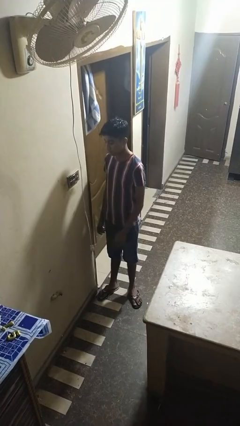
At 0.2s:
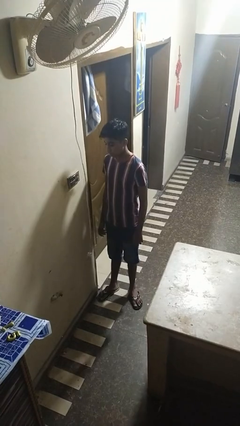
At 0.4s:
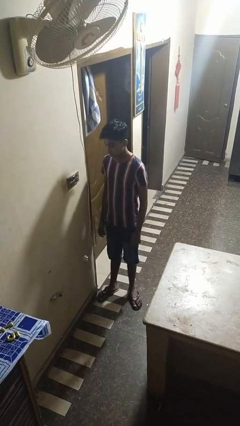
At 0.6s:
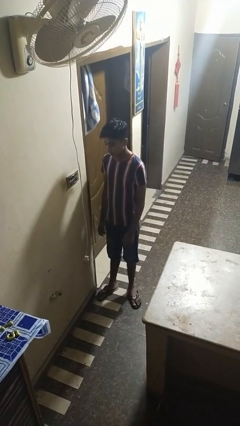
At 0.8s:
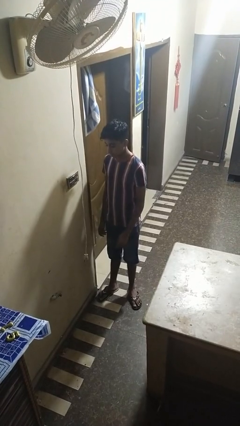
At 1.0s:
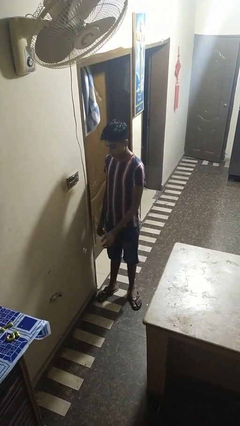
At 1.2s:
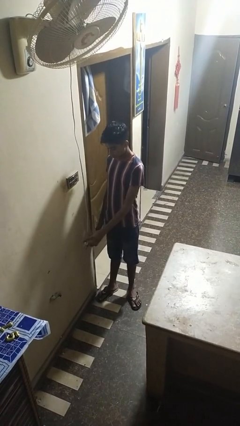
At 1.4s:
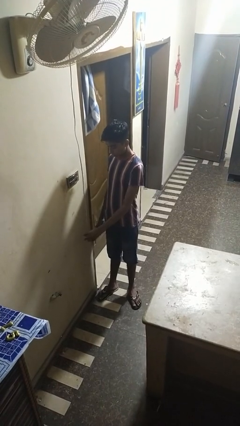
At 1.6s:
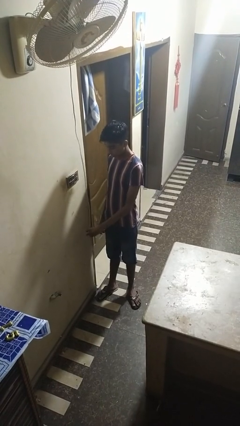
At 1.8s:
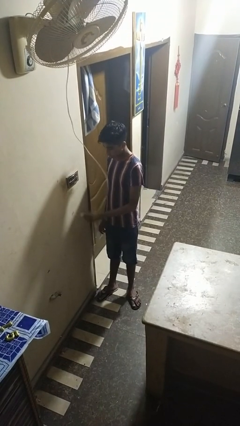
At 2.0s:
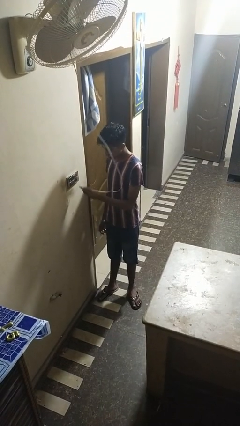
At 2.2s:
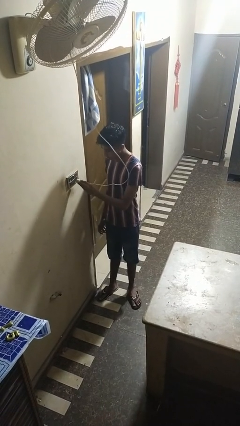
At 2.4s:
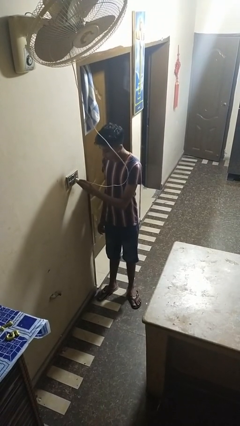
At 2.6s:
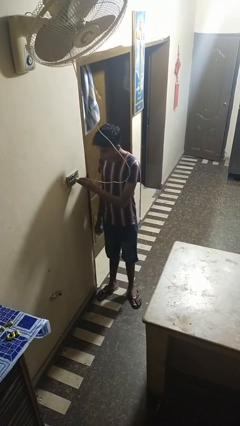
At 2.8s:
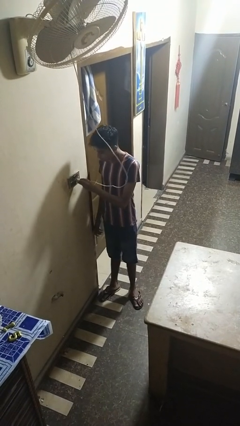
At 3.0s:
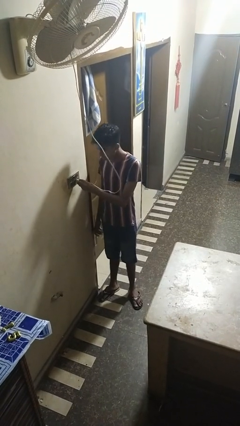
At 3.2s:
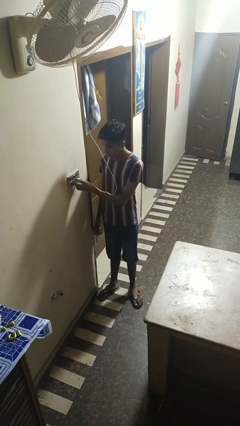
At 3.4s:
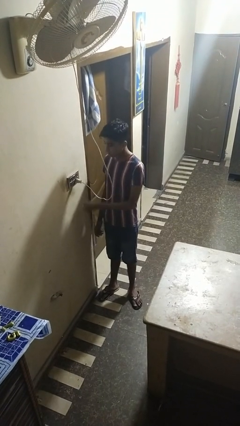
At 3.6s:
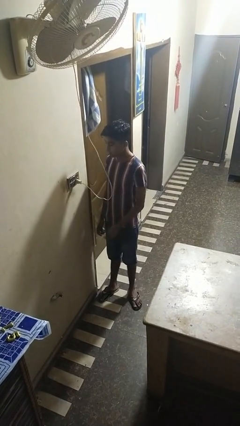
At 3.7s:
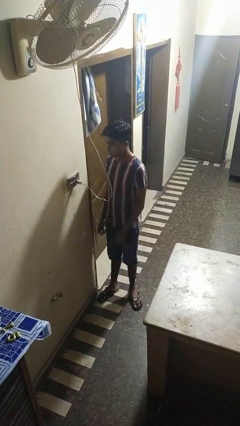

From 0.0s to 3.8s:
person plugs into electrical socket

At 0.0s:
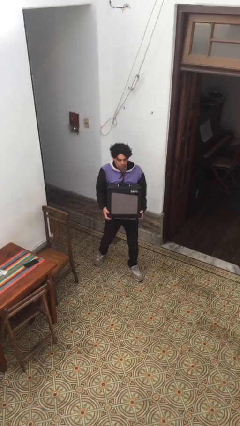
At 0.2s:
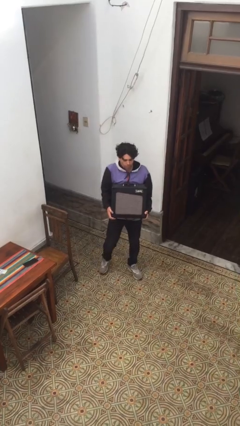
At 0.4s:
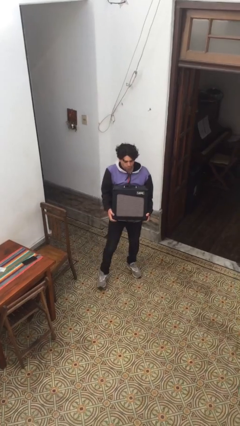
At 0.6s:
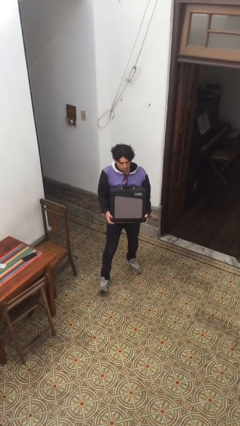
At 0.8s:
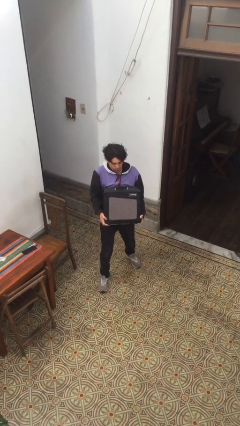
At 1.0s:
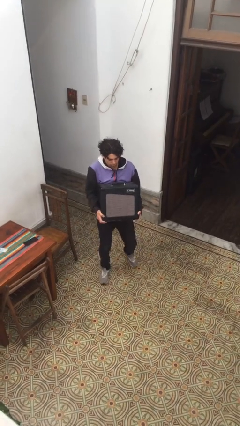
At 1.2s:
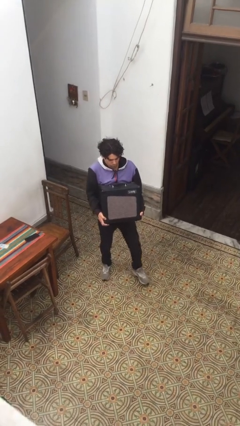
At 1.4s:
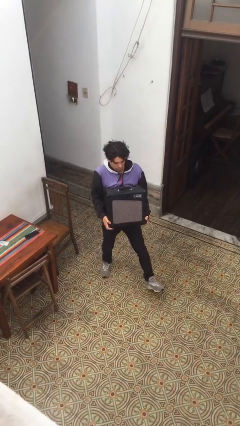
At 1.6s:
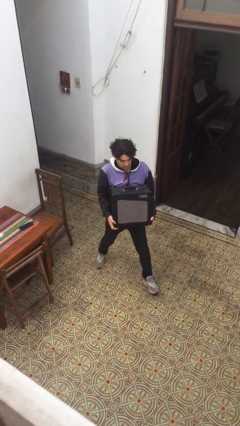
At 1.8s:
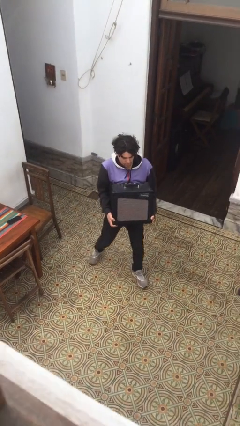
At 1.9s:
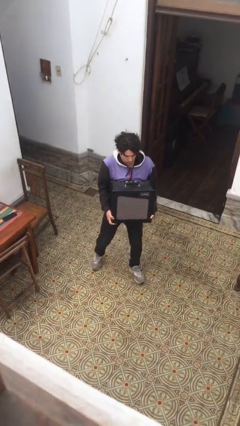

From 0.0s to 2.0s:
person carries heavy object

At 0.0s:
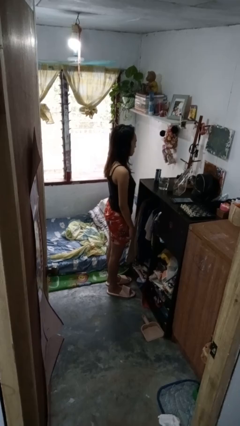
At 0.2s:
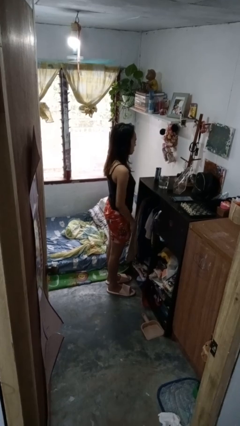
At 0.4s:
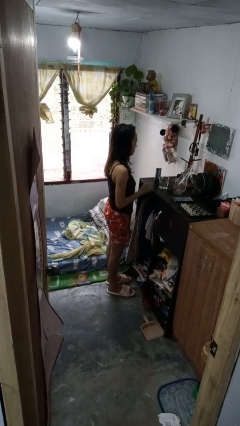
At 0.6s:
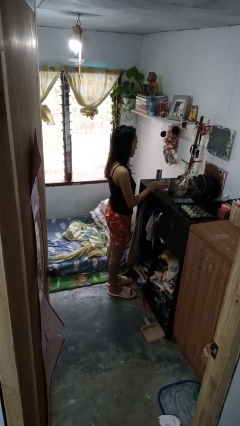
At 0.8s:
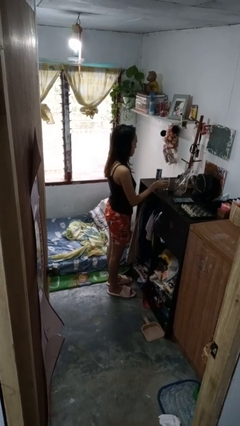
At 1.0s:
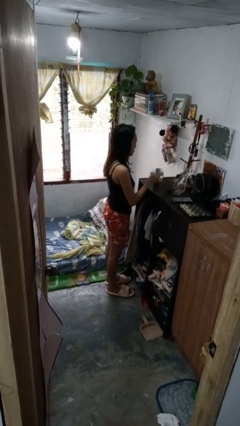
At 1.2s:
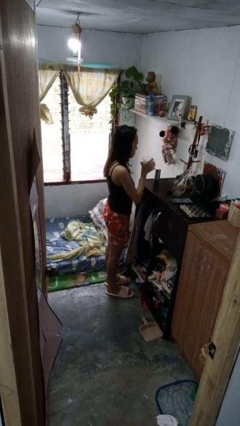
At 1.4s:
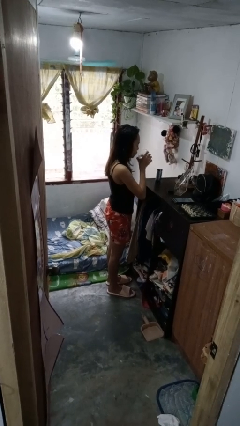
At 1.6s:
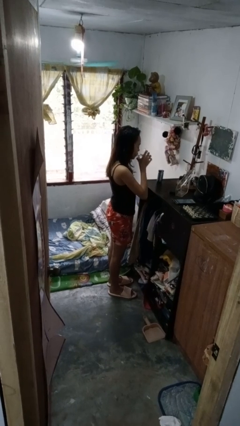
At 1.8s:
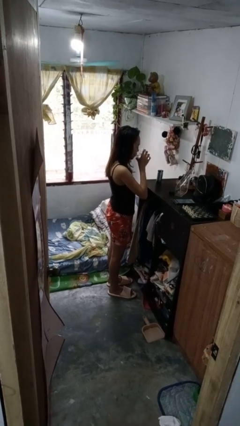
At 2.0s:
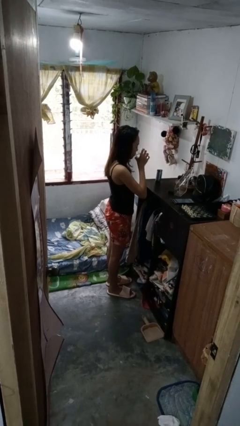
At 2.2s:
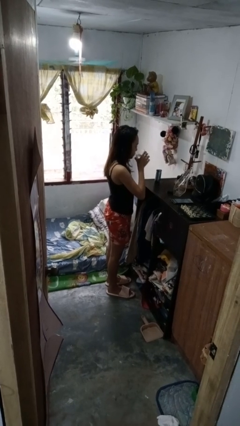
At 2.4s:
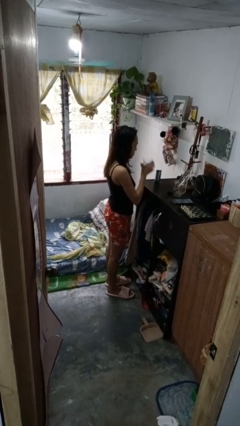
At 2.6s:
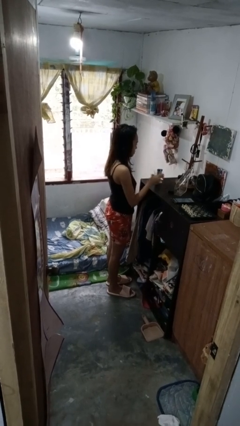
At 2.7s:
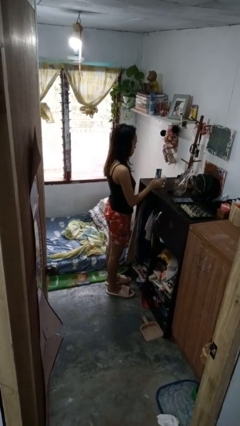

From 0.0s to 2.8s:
person drinks from cup

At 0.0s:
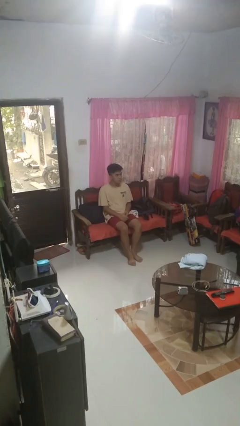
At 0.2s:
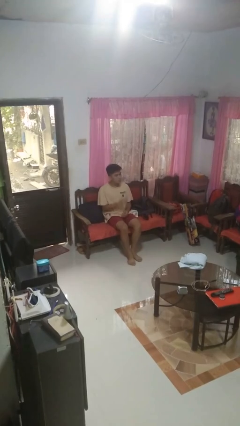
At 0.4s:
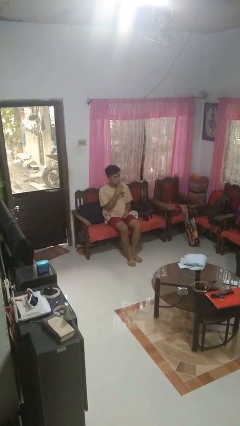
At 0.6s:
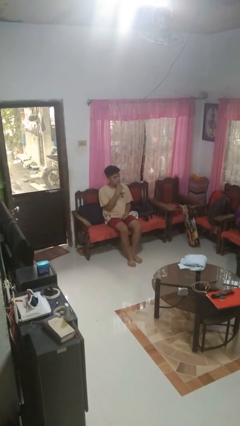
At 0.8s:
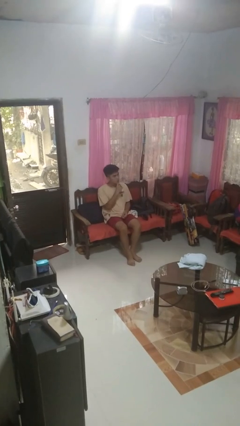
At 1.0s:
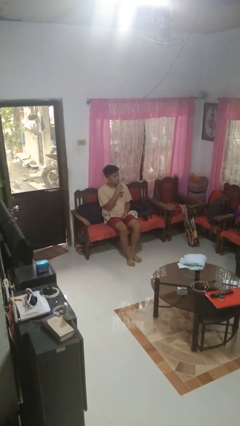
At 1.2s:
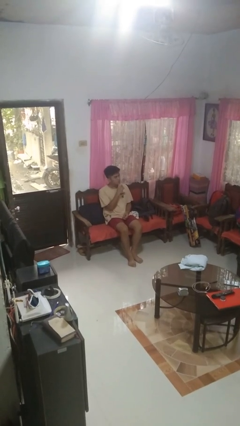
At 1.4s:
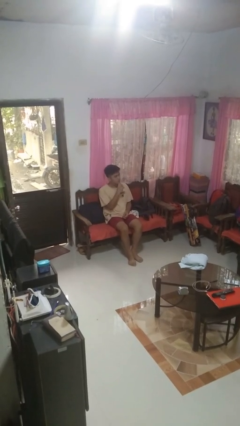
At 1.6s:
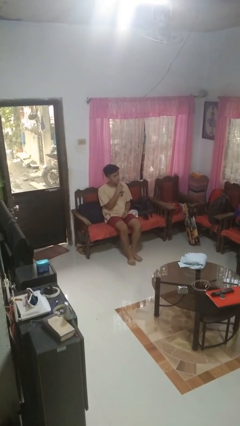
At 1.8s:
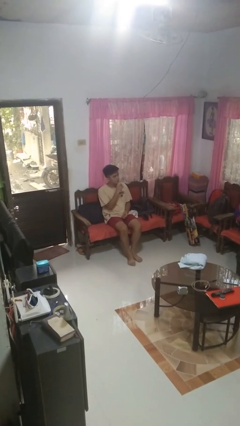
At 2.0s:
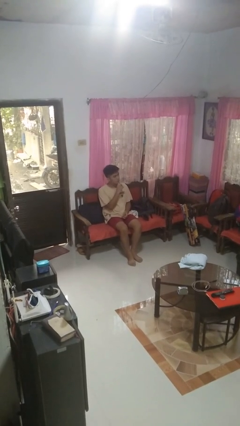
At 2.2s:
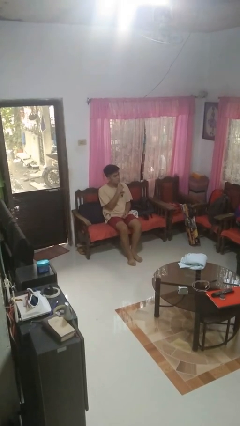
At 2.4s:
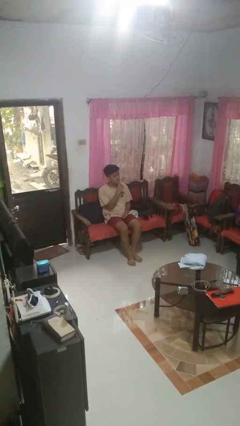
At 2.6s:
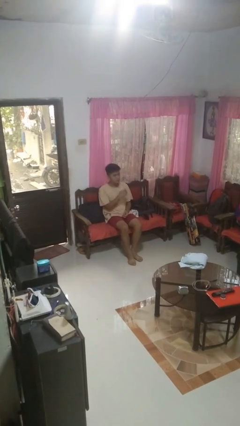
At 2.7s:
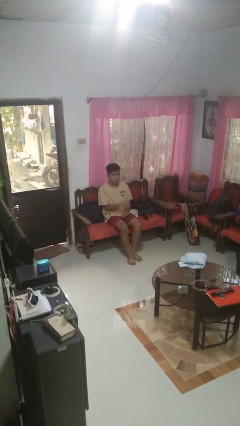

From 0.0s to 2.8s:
person strokes chin

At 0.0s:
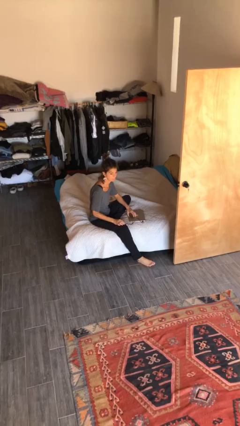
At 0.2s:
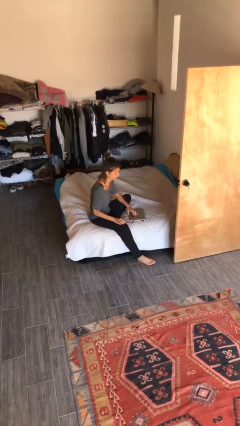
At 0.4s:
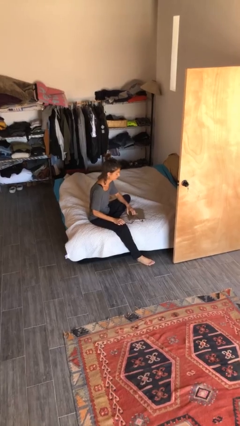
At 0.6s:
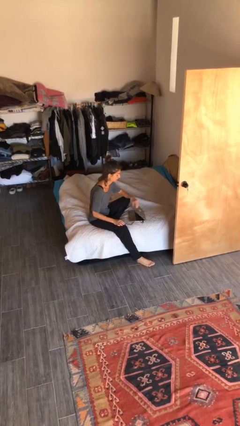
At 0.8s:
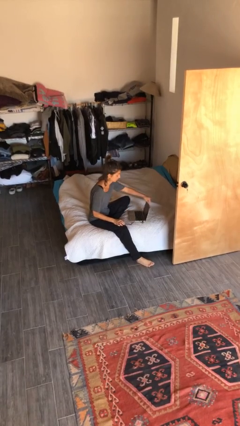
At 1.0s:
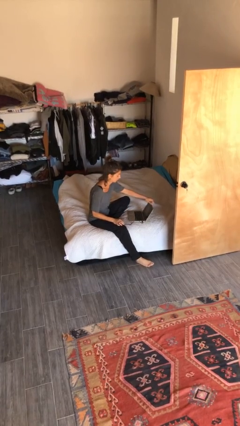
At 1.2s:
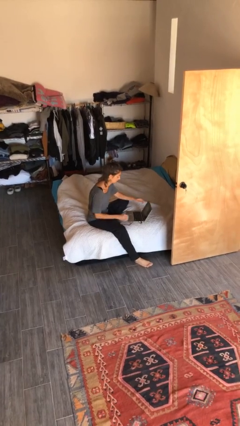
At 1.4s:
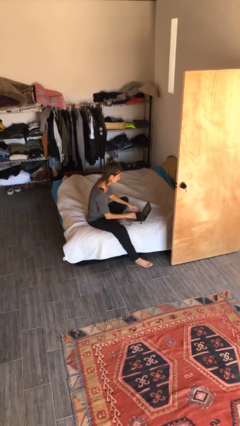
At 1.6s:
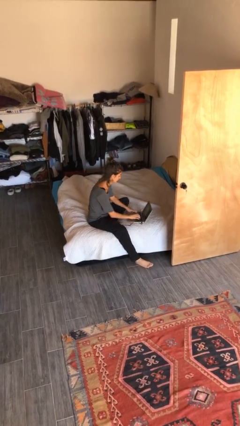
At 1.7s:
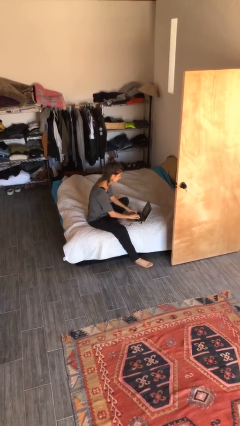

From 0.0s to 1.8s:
person interacts with laptop

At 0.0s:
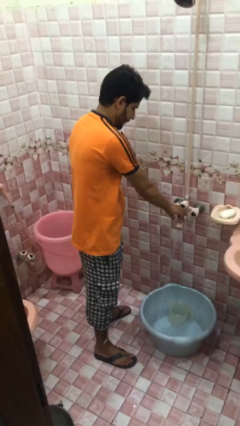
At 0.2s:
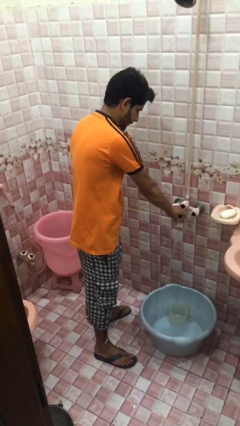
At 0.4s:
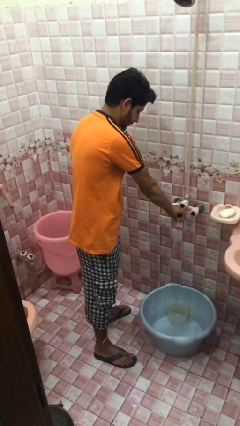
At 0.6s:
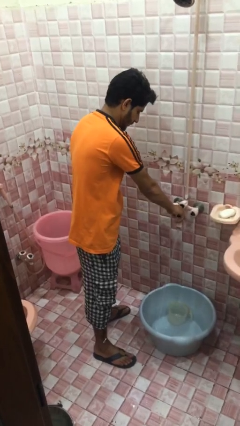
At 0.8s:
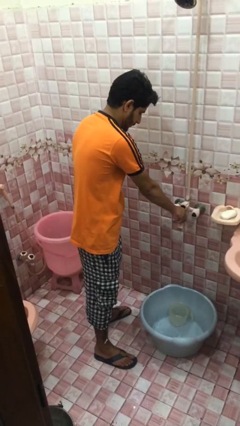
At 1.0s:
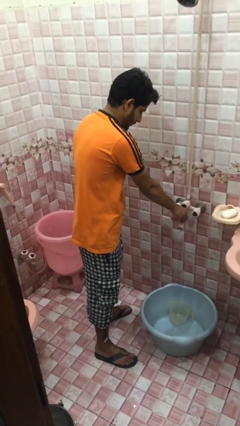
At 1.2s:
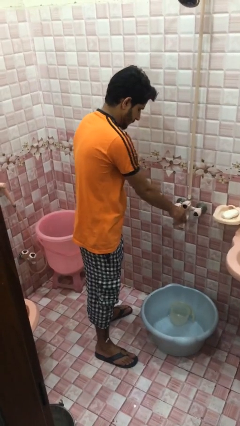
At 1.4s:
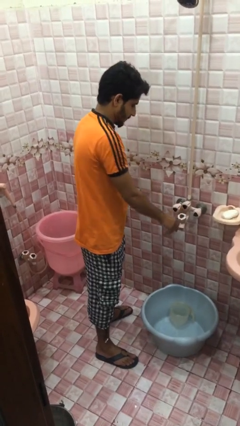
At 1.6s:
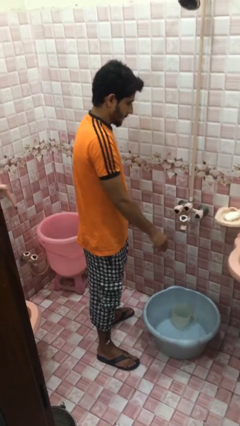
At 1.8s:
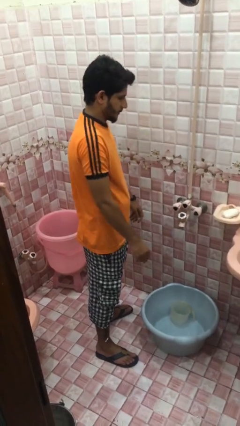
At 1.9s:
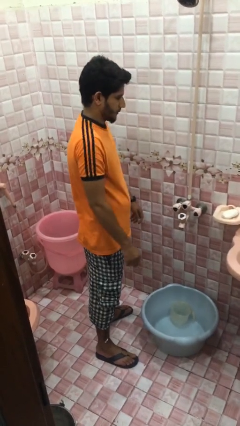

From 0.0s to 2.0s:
person turns off faucet

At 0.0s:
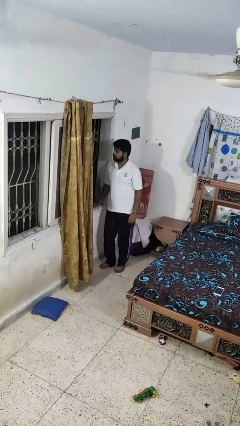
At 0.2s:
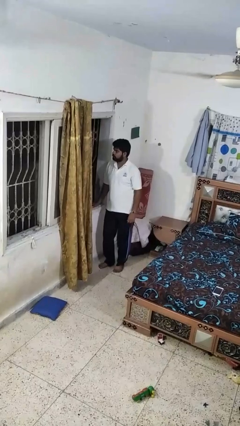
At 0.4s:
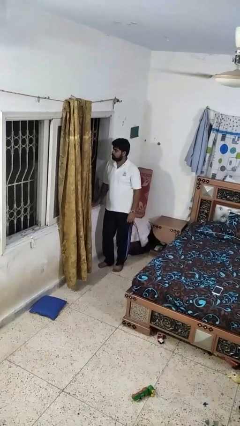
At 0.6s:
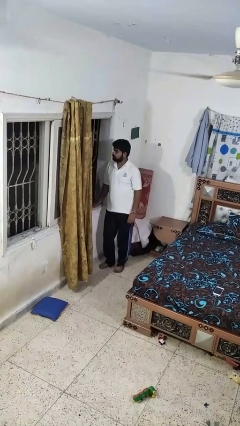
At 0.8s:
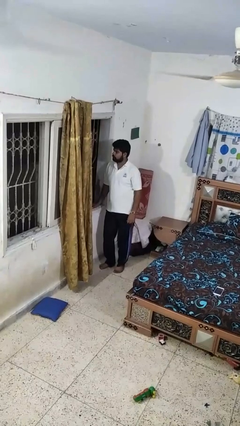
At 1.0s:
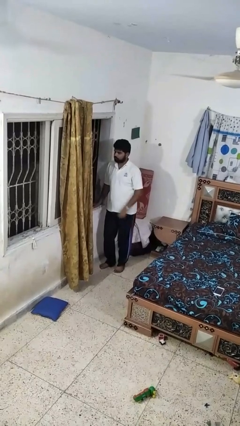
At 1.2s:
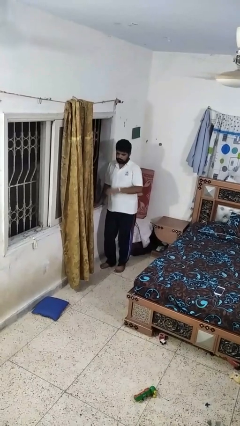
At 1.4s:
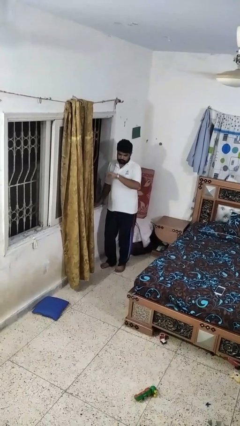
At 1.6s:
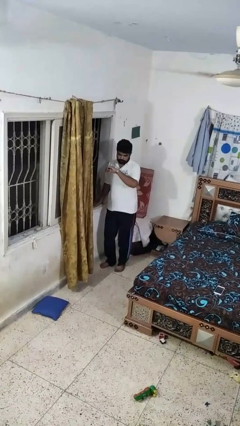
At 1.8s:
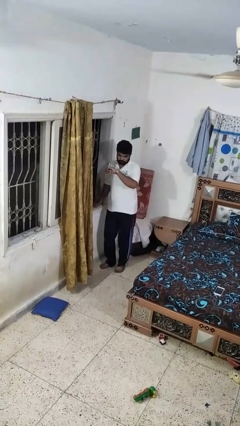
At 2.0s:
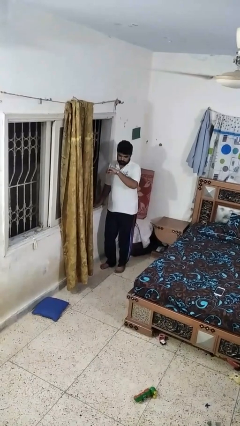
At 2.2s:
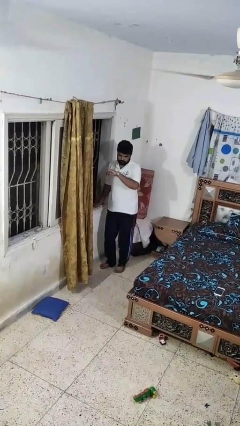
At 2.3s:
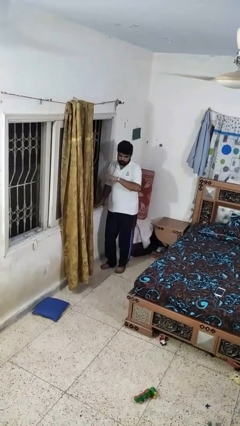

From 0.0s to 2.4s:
person looks at wristwatch
